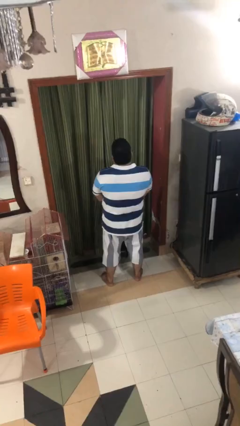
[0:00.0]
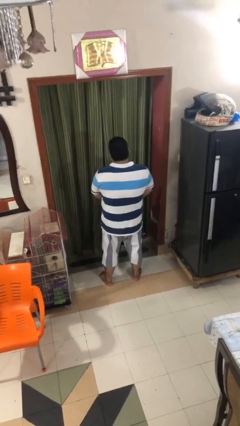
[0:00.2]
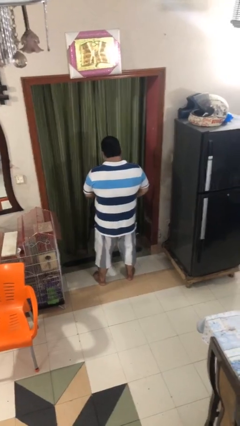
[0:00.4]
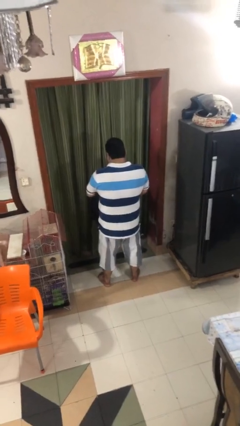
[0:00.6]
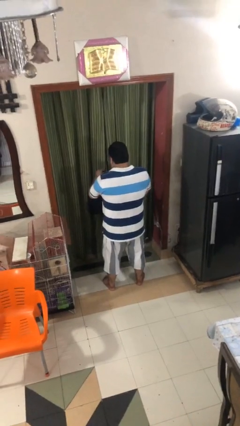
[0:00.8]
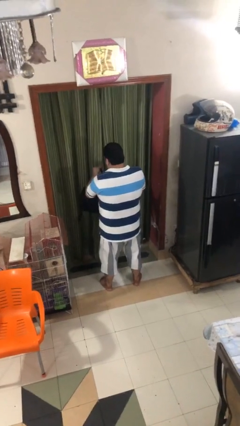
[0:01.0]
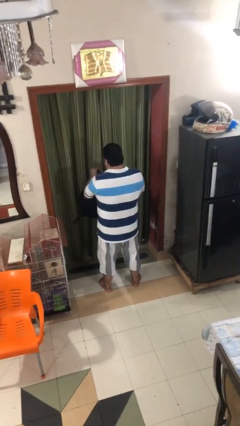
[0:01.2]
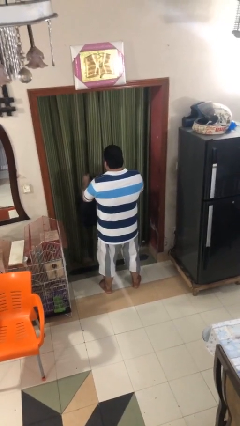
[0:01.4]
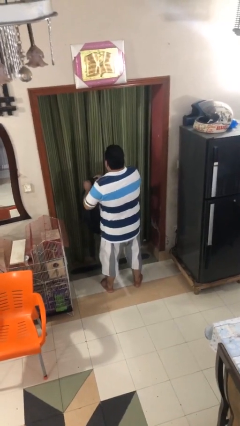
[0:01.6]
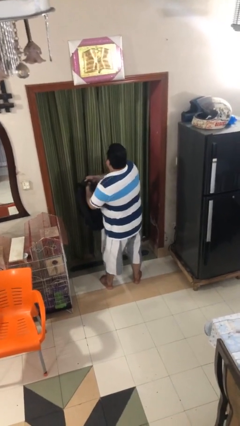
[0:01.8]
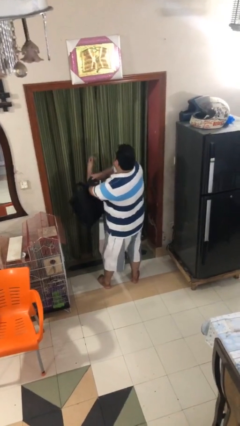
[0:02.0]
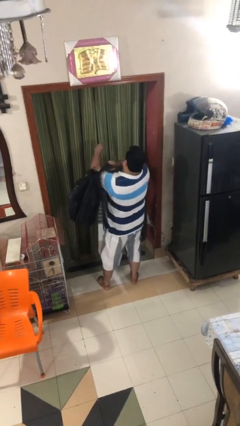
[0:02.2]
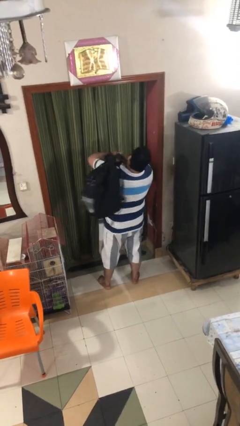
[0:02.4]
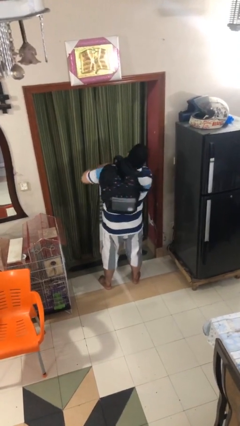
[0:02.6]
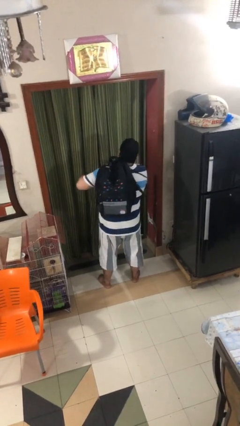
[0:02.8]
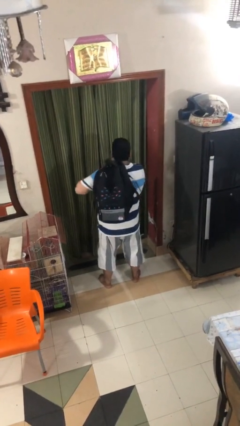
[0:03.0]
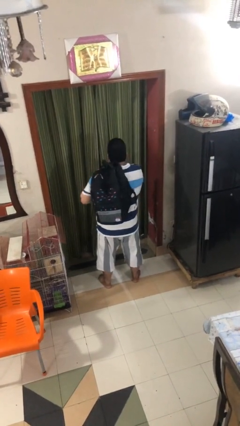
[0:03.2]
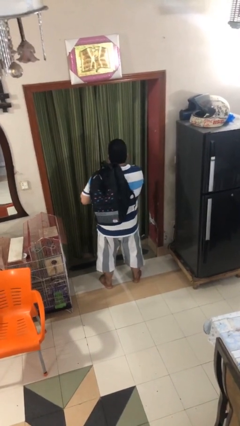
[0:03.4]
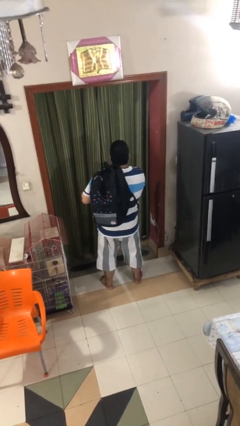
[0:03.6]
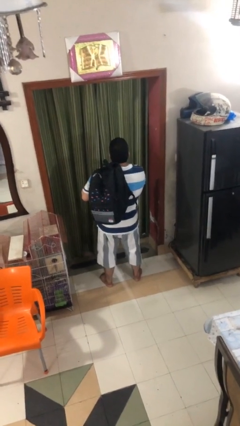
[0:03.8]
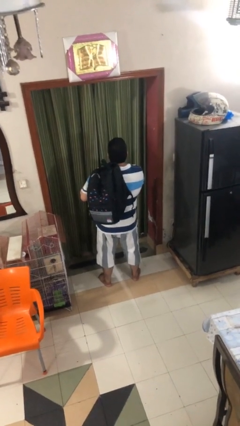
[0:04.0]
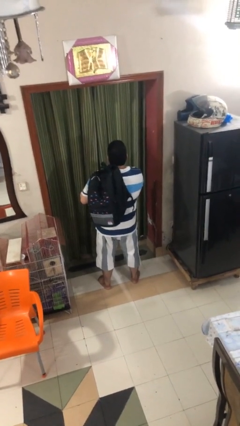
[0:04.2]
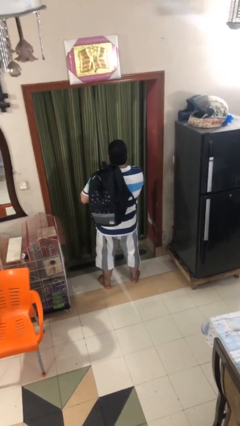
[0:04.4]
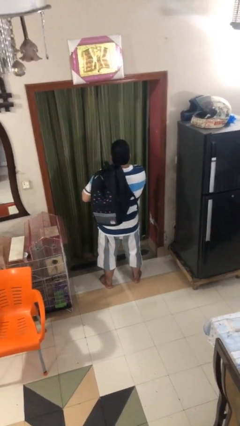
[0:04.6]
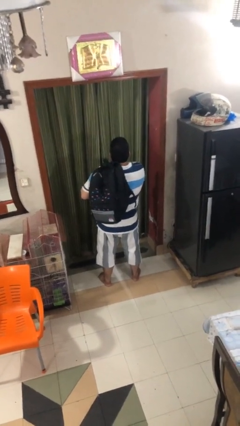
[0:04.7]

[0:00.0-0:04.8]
person puts on backpack

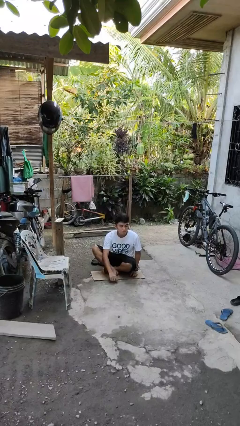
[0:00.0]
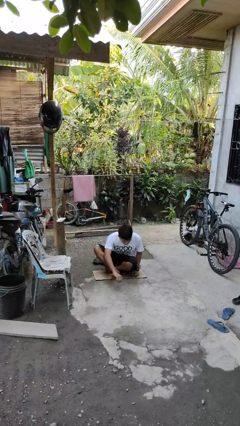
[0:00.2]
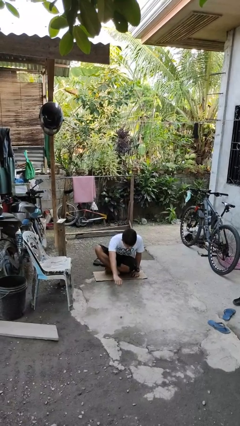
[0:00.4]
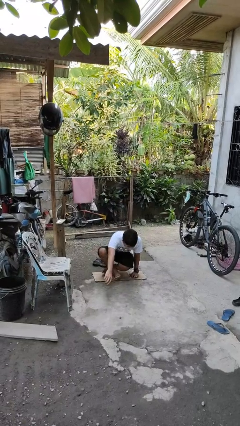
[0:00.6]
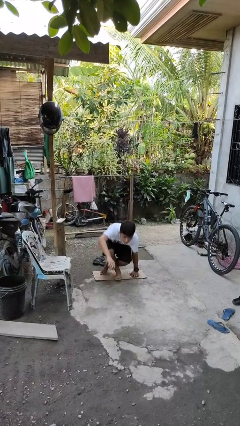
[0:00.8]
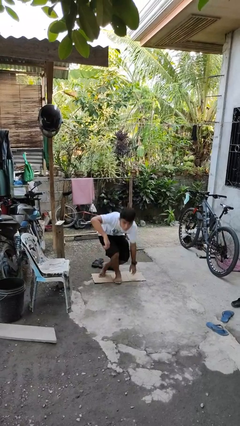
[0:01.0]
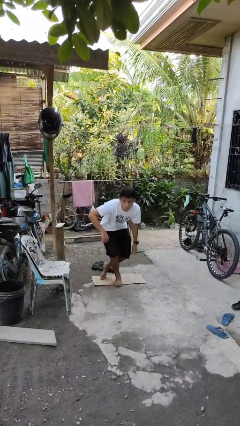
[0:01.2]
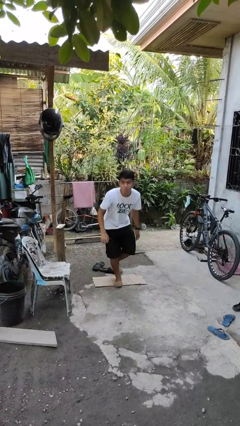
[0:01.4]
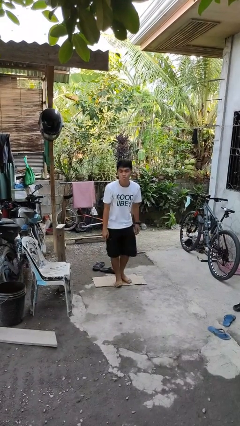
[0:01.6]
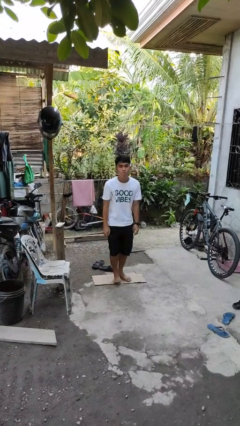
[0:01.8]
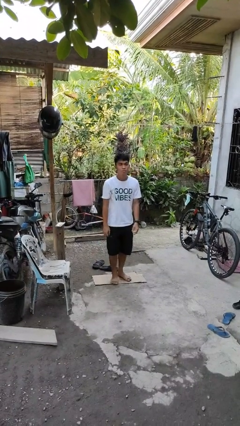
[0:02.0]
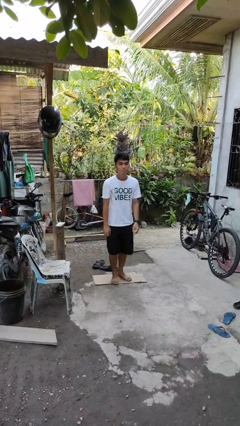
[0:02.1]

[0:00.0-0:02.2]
person stands up from floor

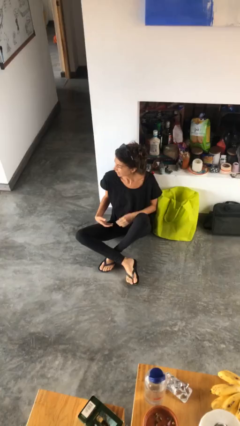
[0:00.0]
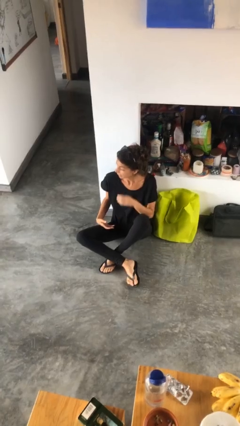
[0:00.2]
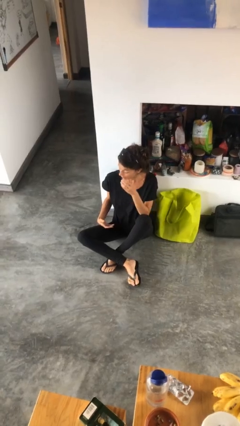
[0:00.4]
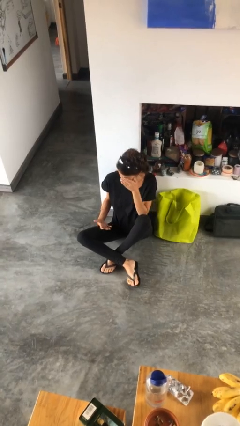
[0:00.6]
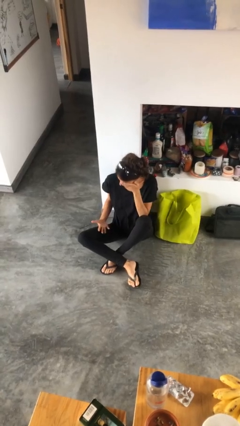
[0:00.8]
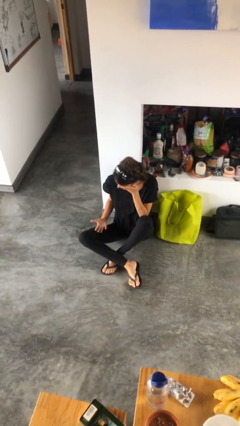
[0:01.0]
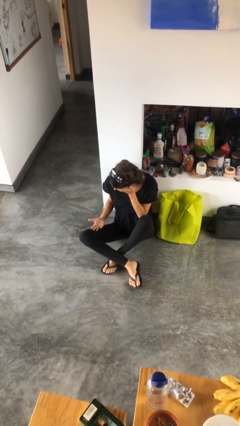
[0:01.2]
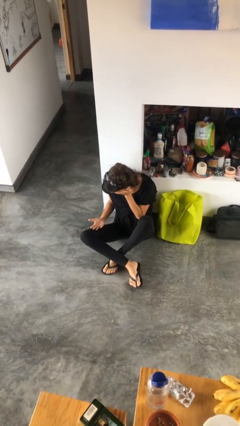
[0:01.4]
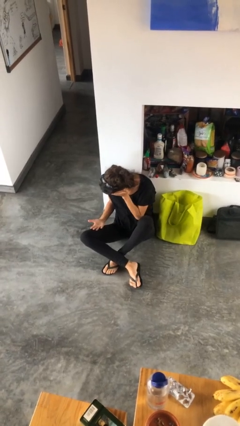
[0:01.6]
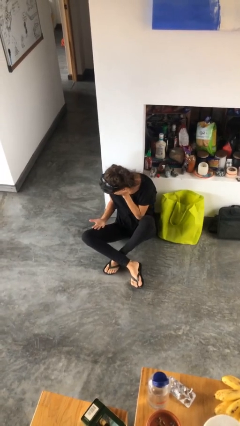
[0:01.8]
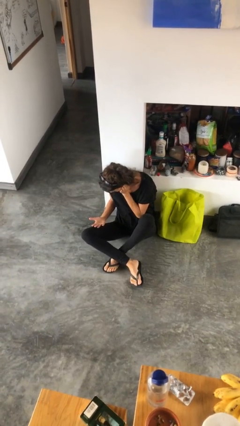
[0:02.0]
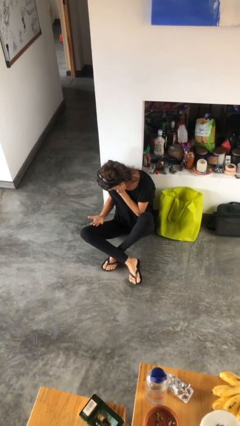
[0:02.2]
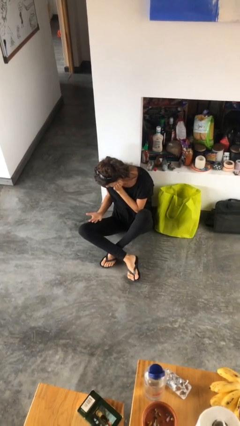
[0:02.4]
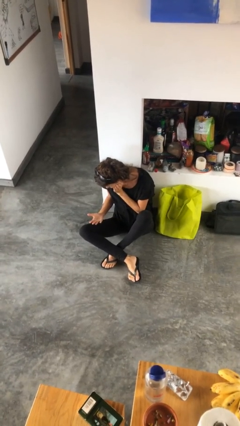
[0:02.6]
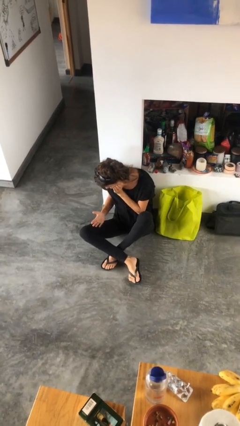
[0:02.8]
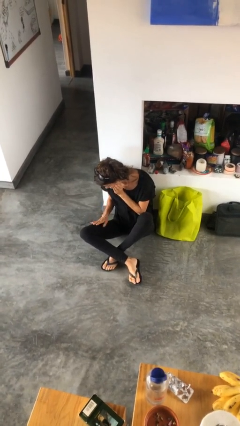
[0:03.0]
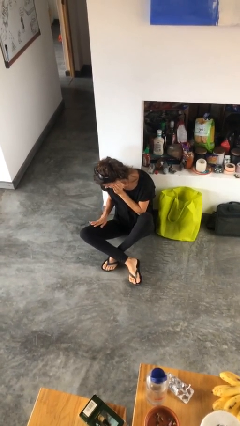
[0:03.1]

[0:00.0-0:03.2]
person looks at hands in lap

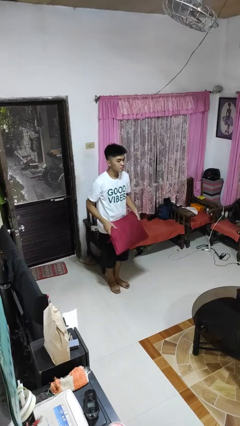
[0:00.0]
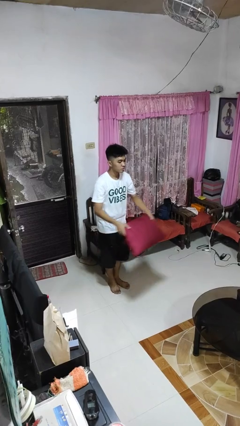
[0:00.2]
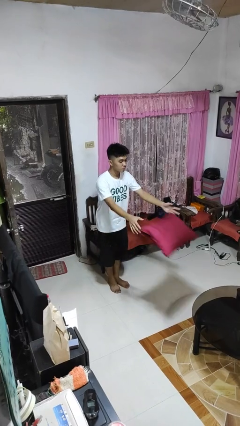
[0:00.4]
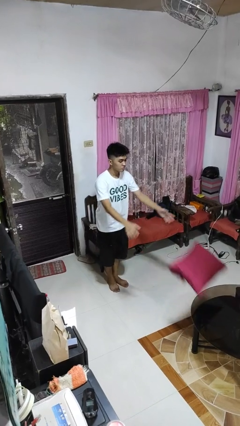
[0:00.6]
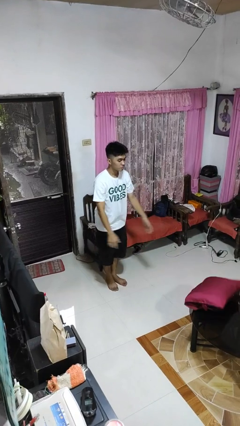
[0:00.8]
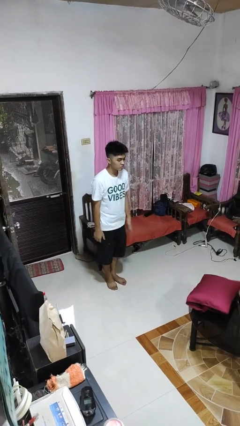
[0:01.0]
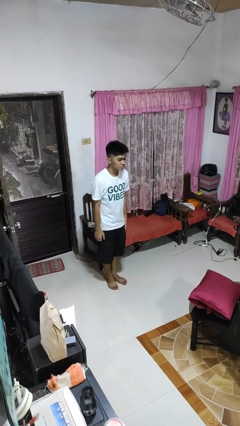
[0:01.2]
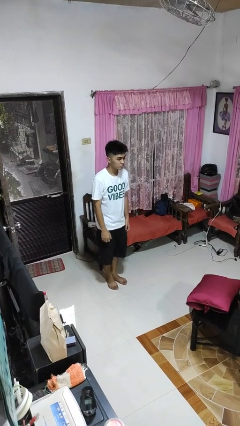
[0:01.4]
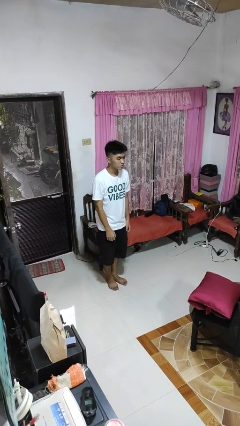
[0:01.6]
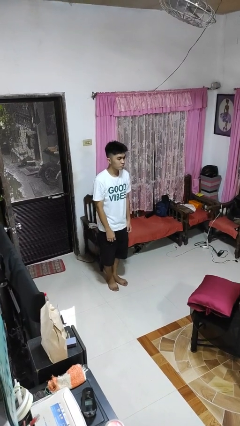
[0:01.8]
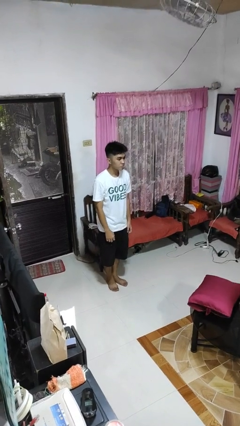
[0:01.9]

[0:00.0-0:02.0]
person throws object on table

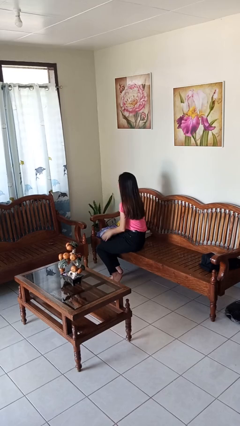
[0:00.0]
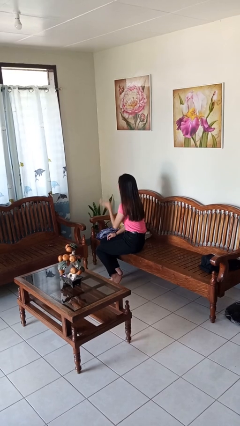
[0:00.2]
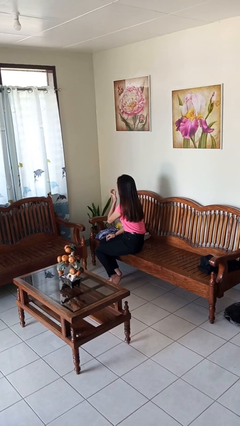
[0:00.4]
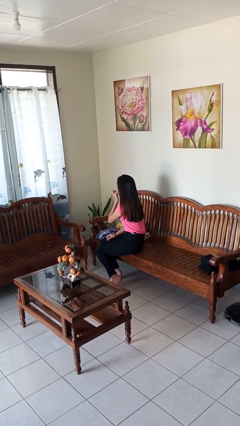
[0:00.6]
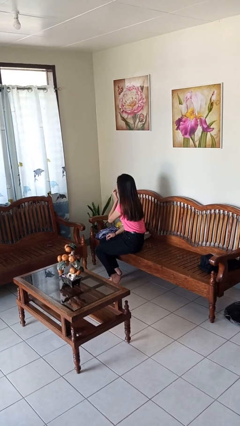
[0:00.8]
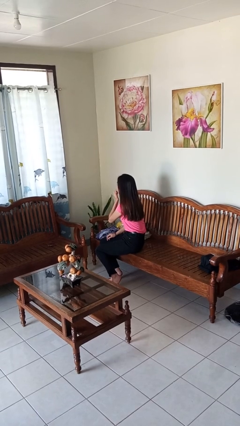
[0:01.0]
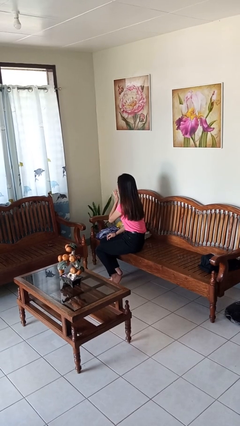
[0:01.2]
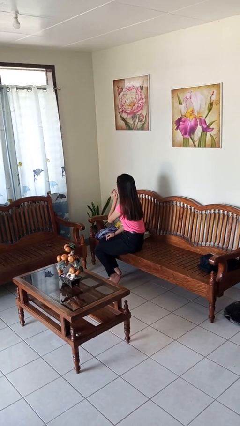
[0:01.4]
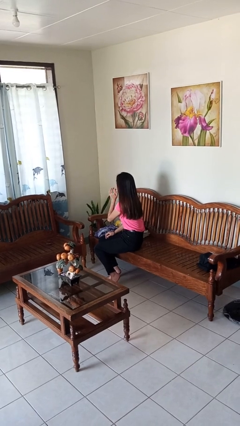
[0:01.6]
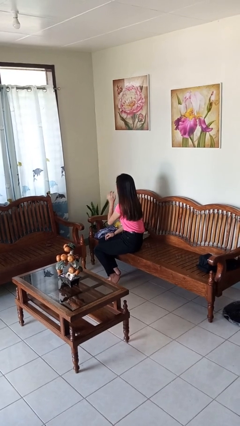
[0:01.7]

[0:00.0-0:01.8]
person licks fingers

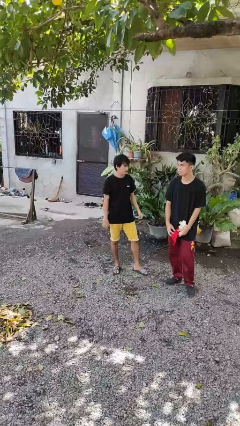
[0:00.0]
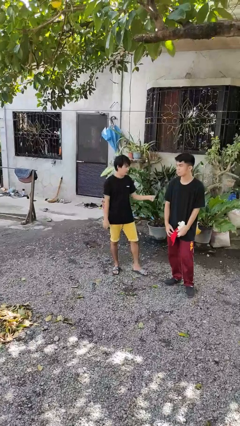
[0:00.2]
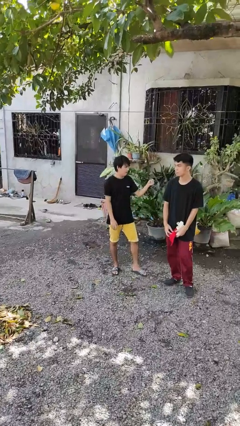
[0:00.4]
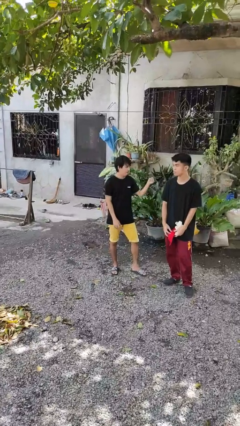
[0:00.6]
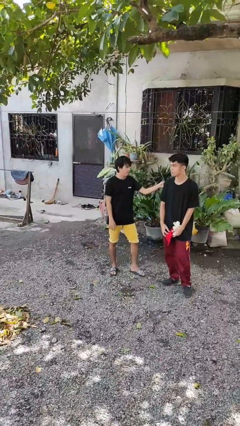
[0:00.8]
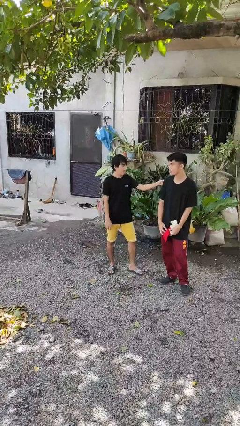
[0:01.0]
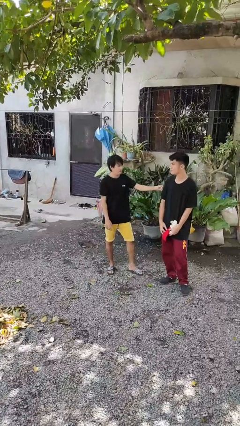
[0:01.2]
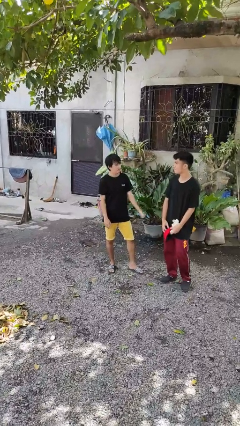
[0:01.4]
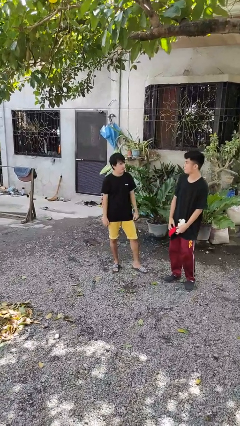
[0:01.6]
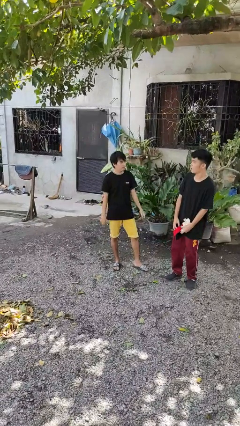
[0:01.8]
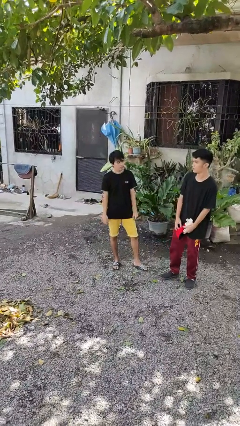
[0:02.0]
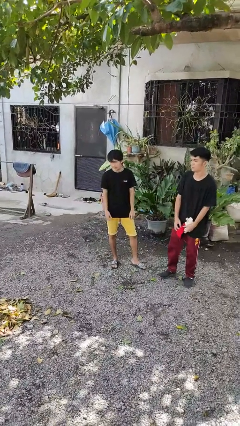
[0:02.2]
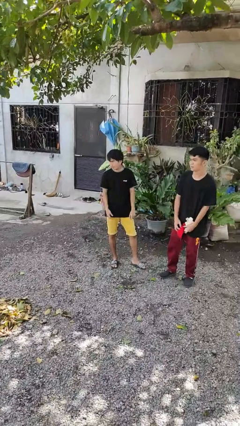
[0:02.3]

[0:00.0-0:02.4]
person pounds shoulders of person

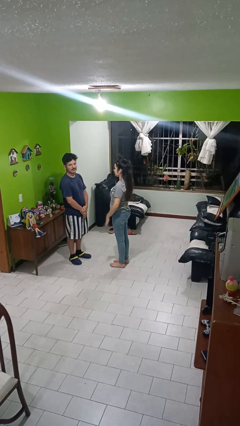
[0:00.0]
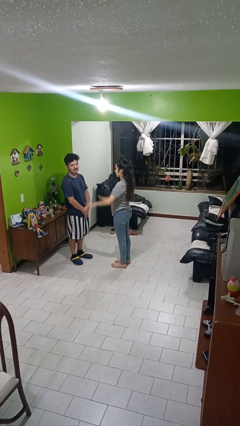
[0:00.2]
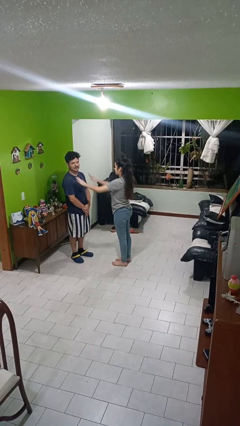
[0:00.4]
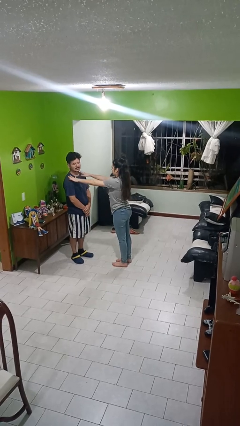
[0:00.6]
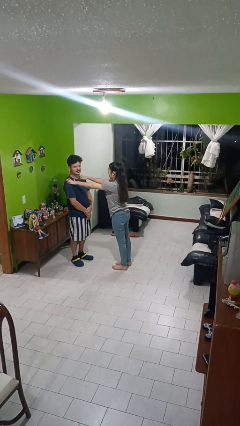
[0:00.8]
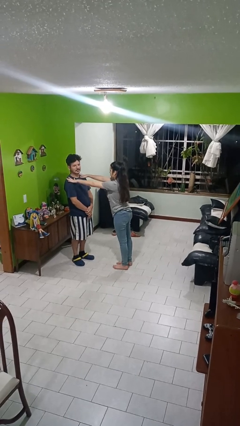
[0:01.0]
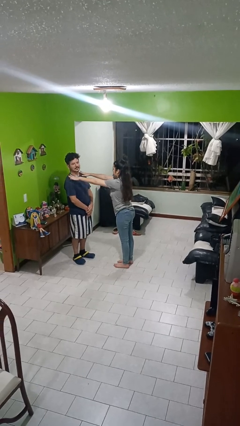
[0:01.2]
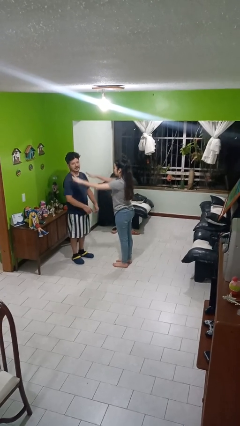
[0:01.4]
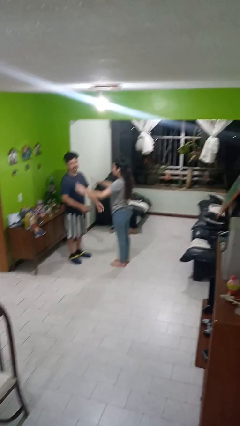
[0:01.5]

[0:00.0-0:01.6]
person shoves person
